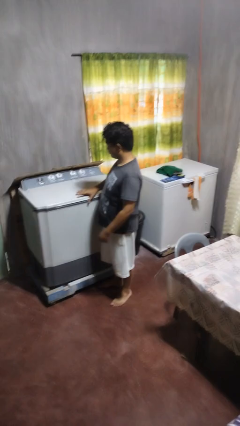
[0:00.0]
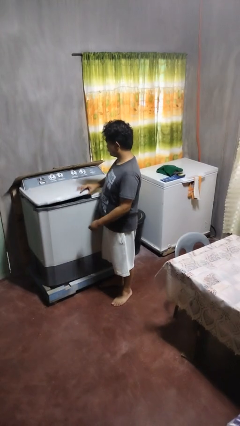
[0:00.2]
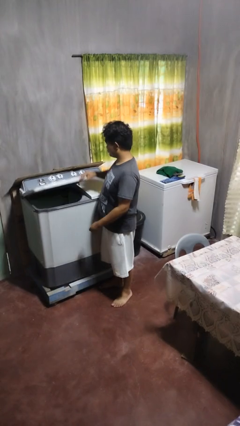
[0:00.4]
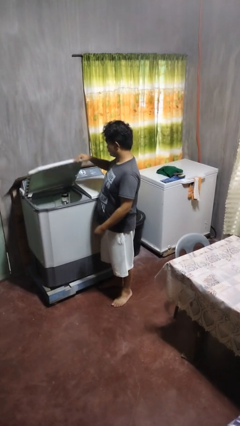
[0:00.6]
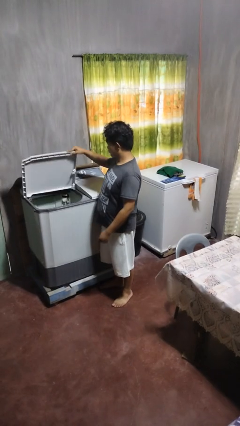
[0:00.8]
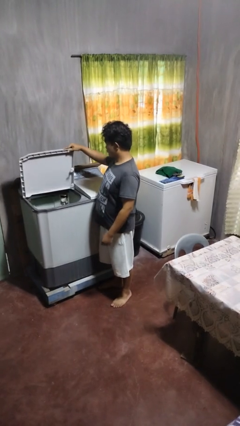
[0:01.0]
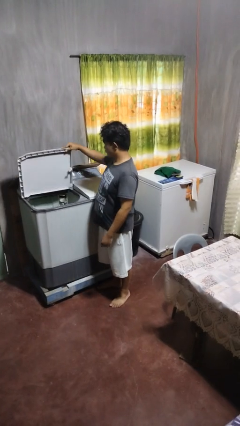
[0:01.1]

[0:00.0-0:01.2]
person opens clothes washer

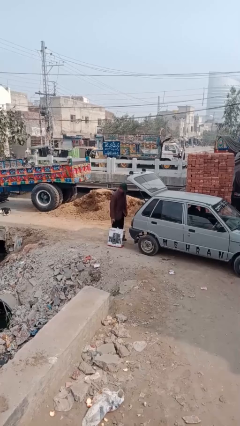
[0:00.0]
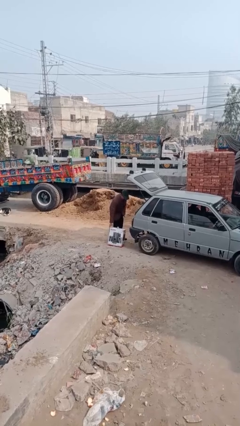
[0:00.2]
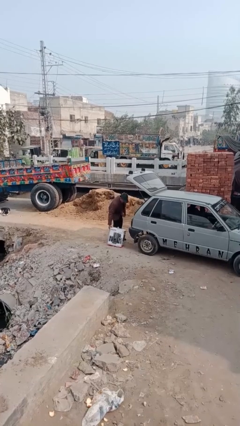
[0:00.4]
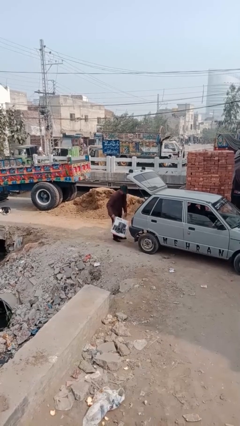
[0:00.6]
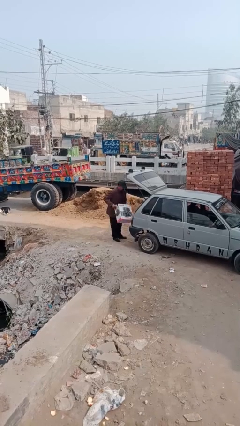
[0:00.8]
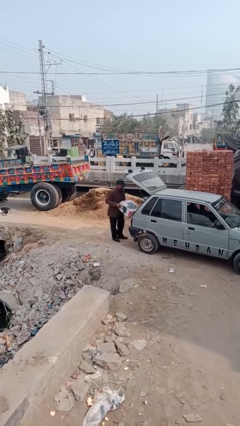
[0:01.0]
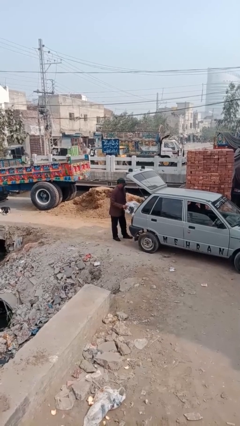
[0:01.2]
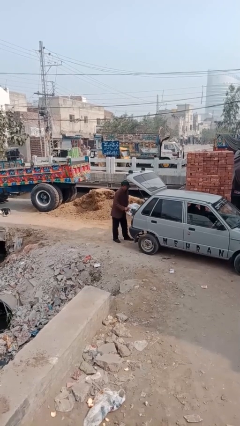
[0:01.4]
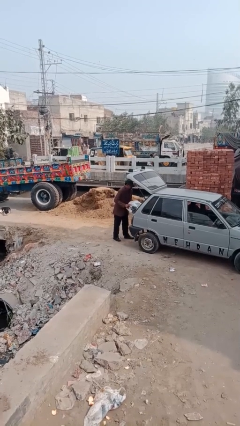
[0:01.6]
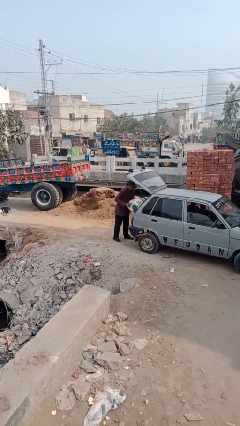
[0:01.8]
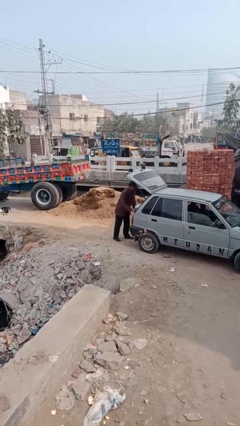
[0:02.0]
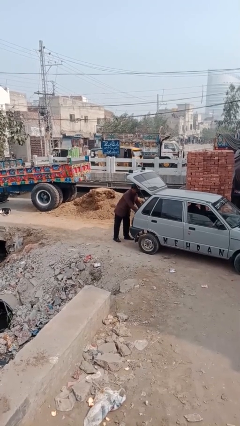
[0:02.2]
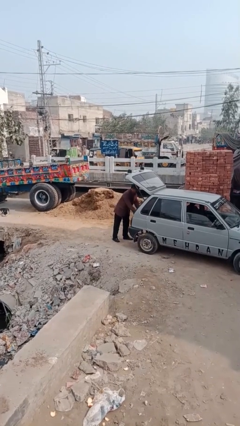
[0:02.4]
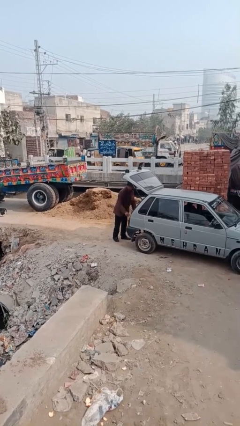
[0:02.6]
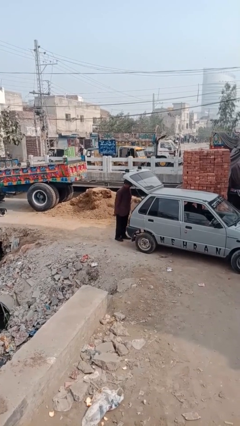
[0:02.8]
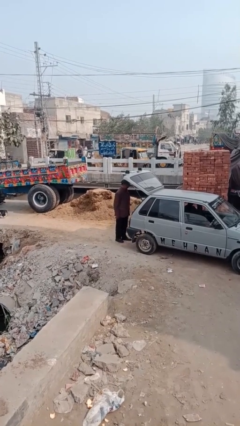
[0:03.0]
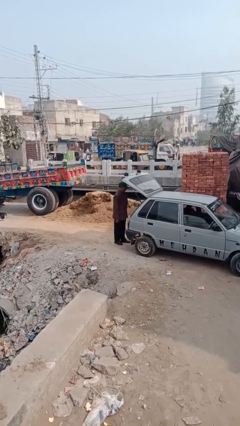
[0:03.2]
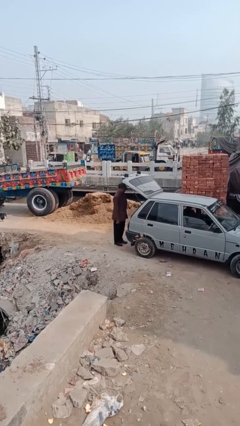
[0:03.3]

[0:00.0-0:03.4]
person loads car

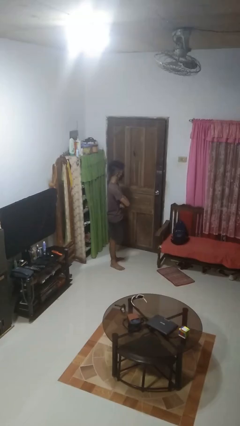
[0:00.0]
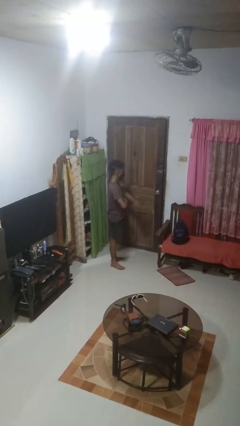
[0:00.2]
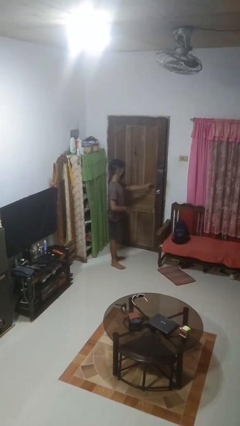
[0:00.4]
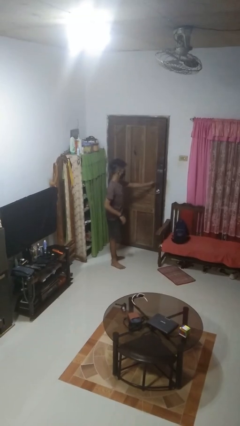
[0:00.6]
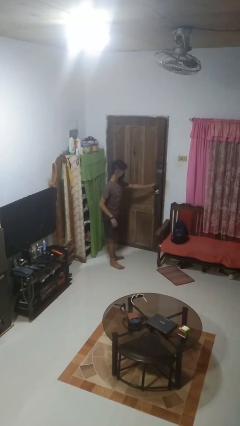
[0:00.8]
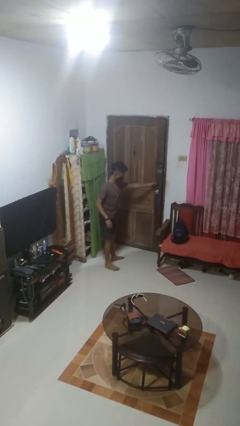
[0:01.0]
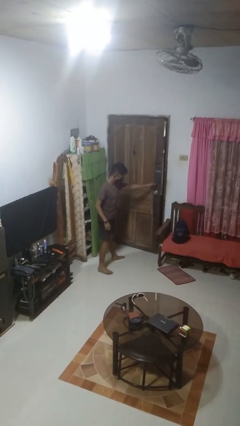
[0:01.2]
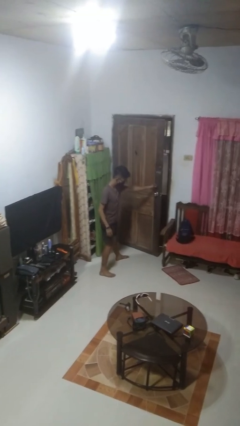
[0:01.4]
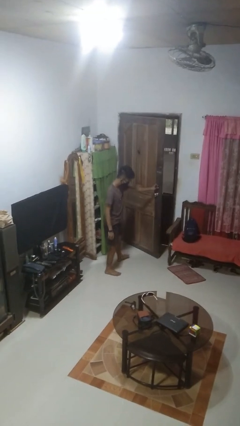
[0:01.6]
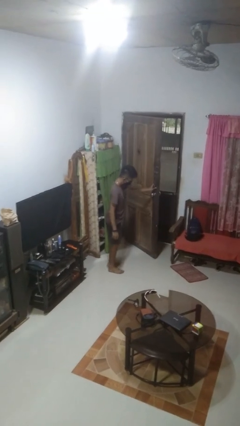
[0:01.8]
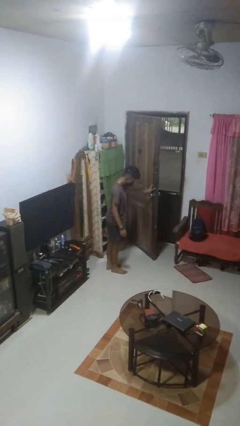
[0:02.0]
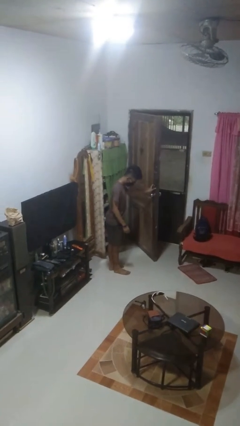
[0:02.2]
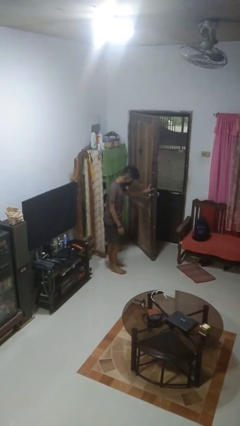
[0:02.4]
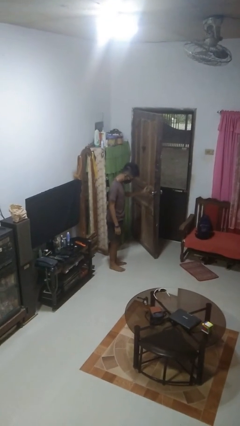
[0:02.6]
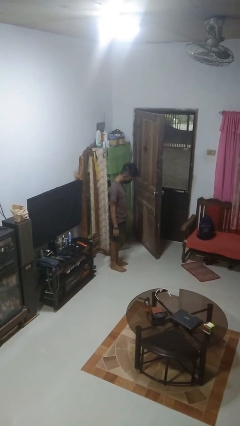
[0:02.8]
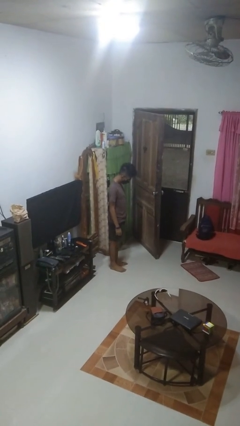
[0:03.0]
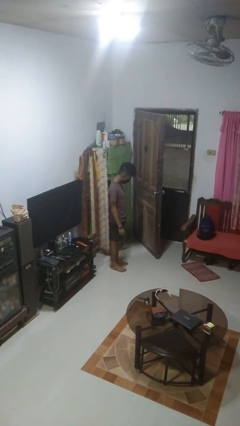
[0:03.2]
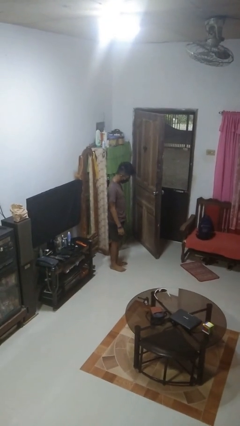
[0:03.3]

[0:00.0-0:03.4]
person opens facility door

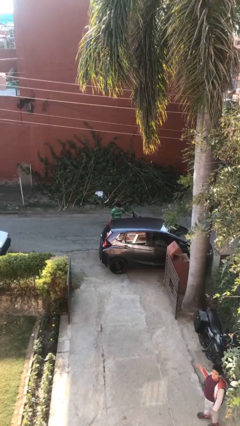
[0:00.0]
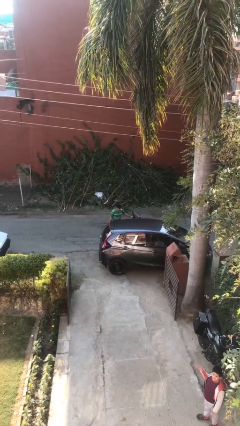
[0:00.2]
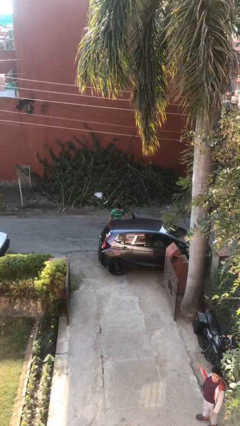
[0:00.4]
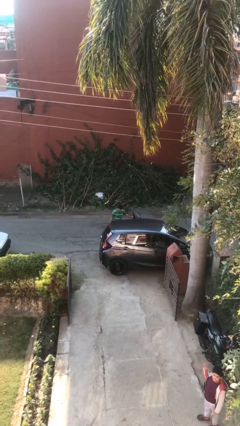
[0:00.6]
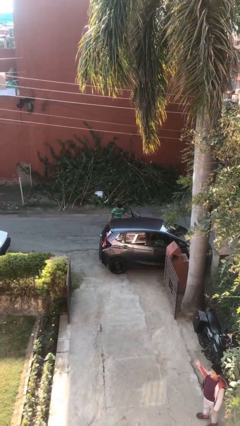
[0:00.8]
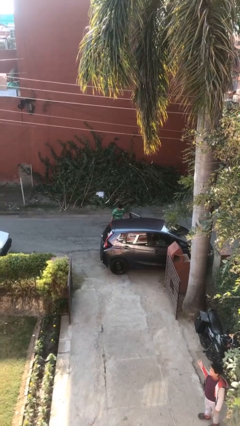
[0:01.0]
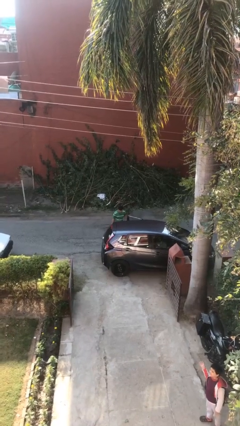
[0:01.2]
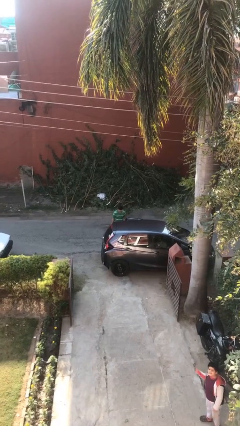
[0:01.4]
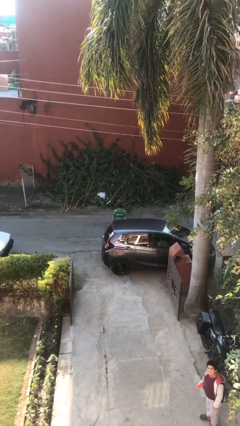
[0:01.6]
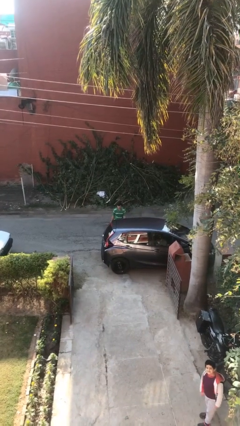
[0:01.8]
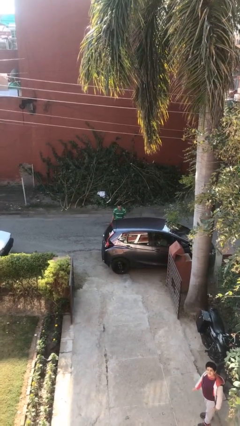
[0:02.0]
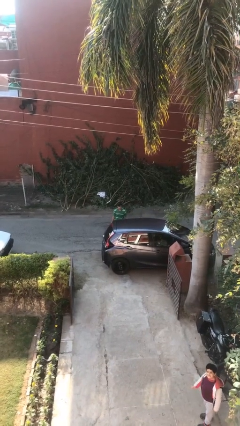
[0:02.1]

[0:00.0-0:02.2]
person closes car door

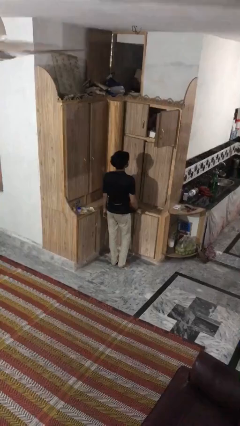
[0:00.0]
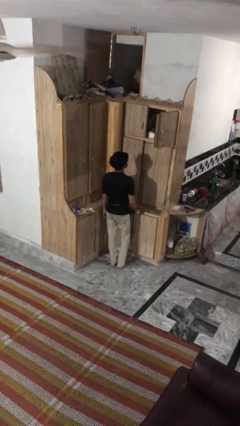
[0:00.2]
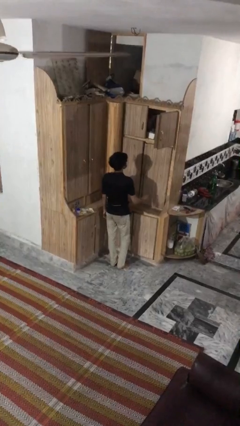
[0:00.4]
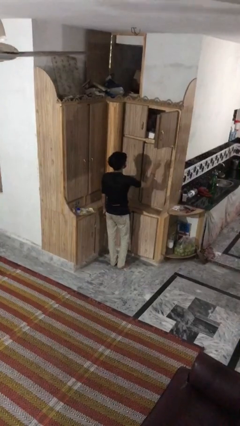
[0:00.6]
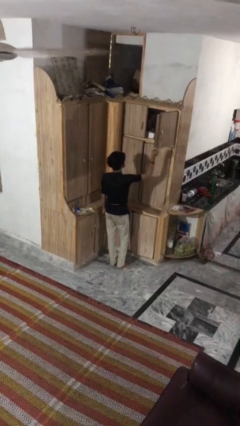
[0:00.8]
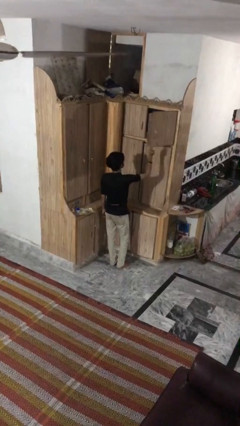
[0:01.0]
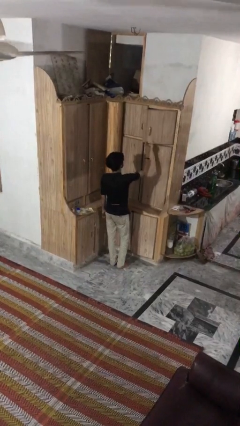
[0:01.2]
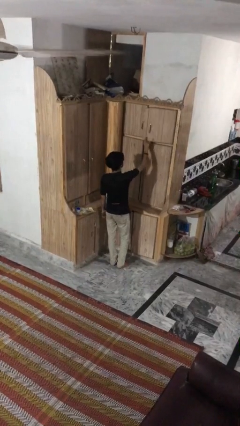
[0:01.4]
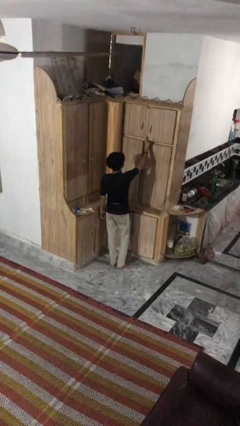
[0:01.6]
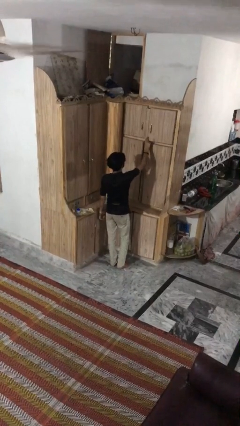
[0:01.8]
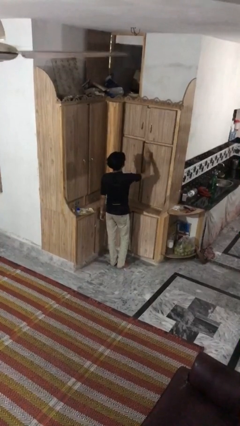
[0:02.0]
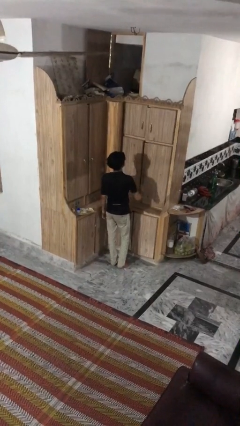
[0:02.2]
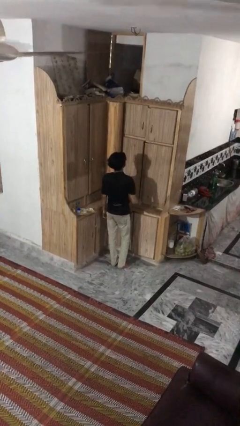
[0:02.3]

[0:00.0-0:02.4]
person closes cabinet

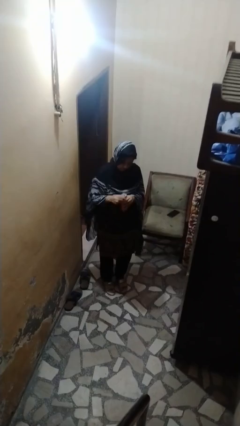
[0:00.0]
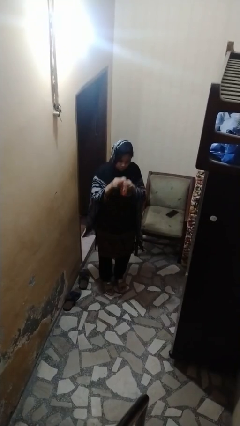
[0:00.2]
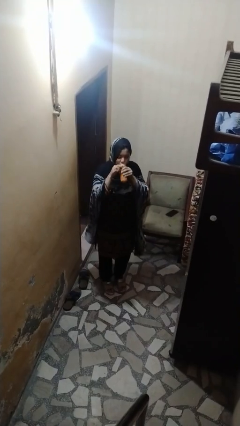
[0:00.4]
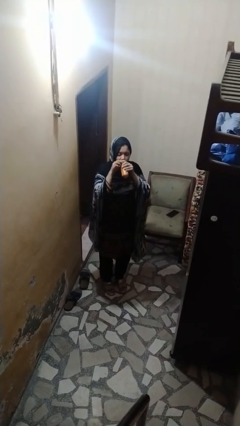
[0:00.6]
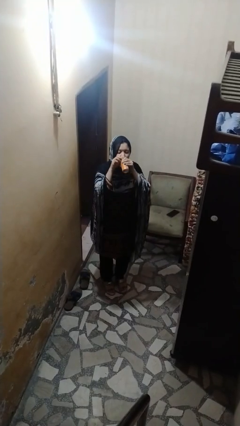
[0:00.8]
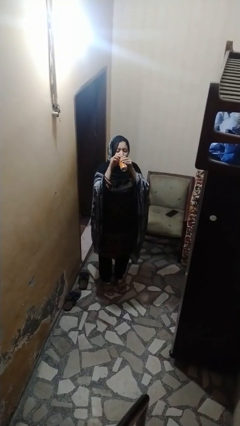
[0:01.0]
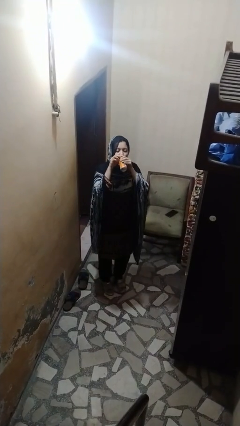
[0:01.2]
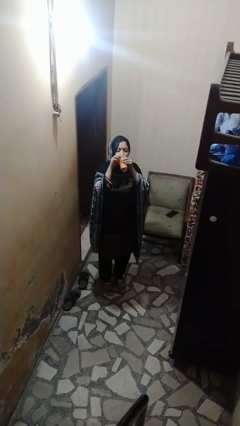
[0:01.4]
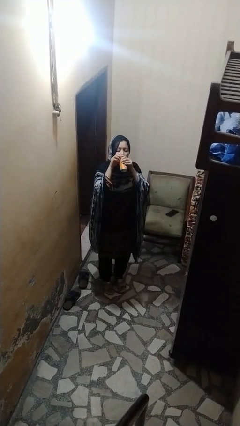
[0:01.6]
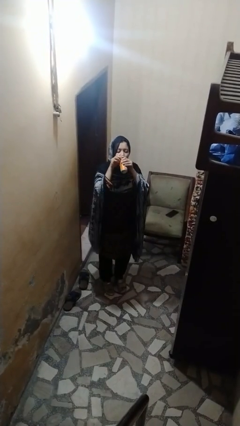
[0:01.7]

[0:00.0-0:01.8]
person drinks from beverage can

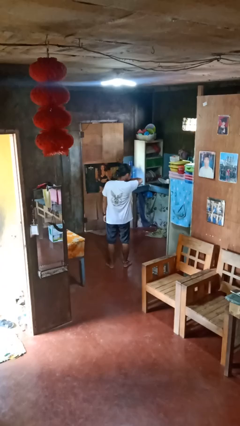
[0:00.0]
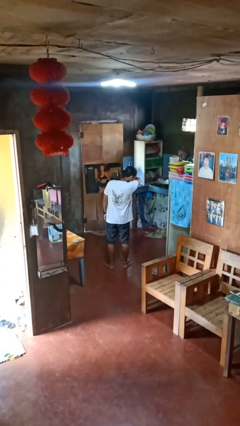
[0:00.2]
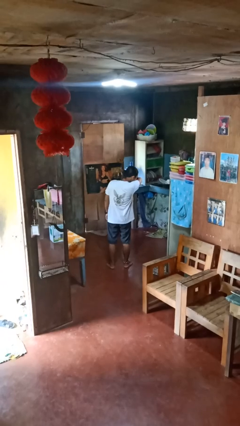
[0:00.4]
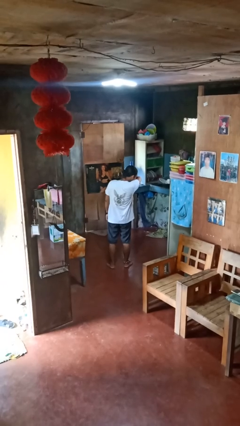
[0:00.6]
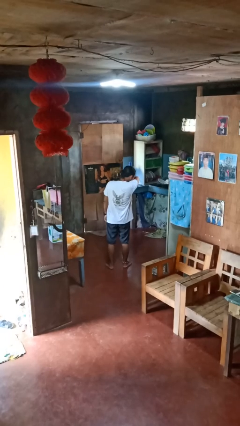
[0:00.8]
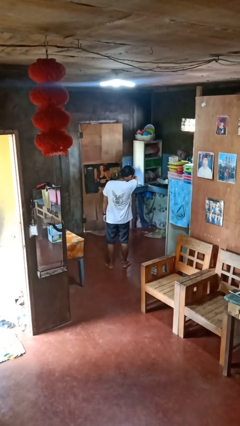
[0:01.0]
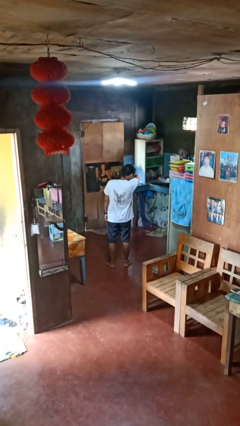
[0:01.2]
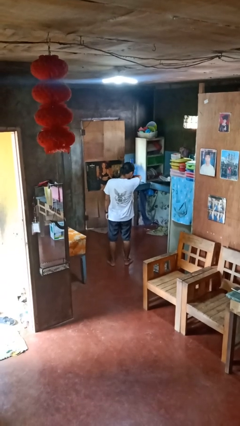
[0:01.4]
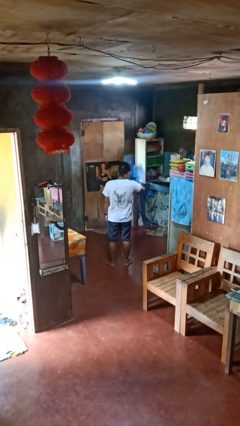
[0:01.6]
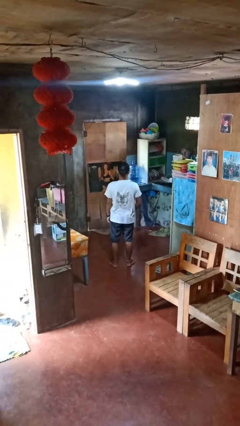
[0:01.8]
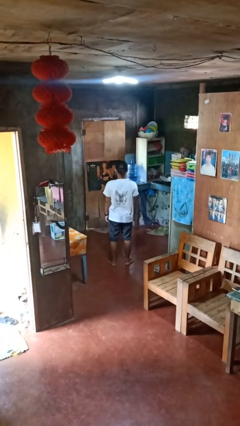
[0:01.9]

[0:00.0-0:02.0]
person sneezes into arm

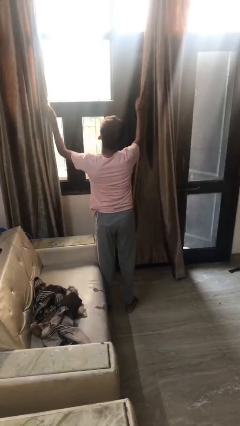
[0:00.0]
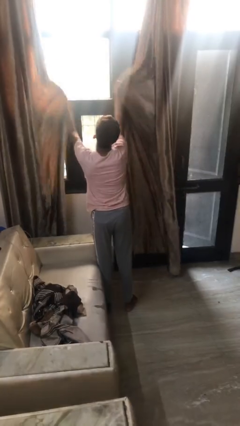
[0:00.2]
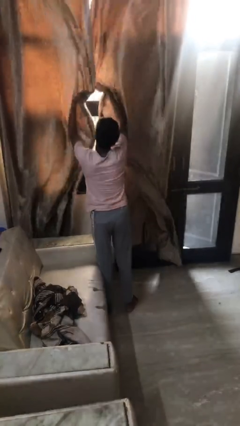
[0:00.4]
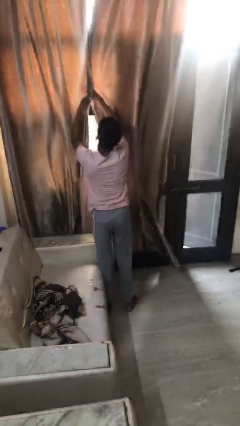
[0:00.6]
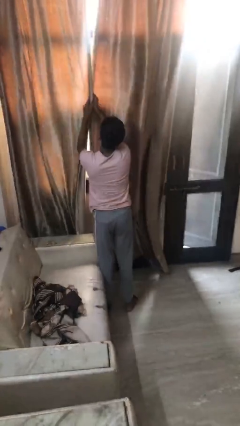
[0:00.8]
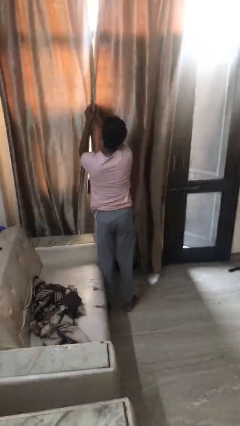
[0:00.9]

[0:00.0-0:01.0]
person closes curtains
